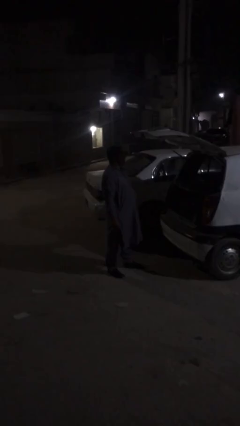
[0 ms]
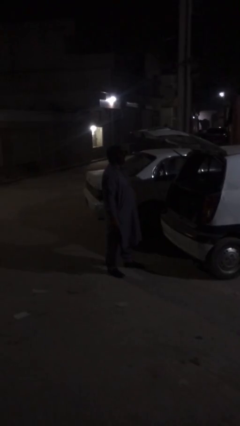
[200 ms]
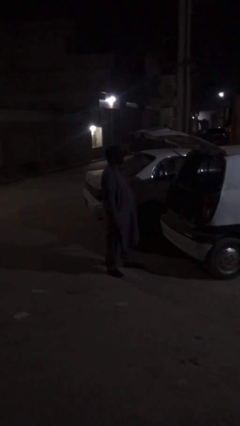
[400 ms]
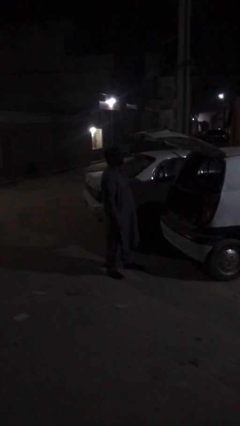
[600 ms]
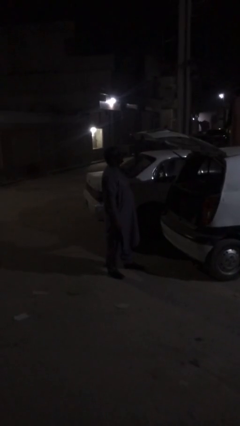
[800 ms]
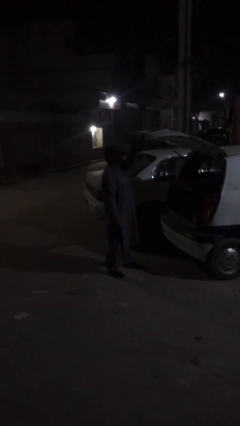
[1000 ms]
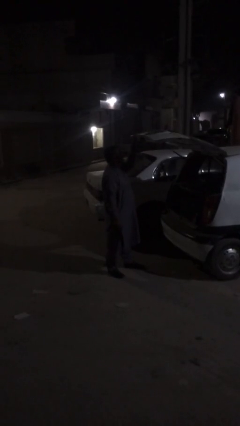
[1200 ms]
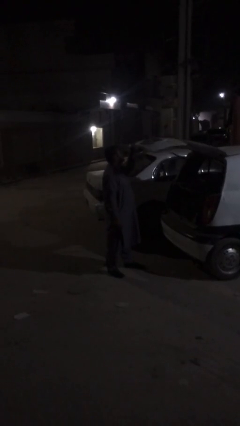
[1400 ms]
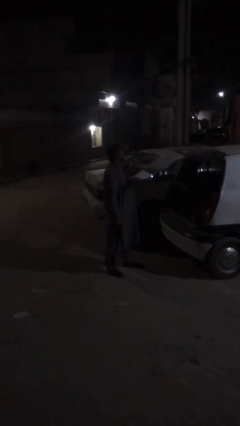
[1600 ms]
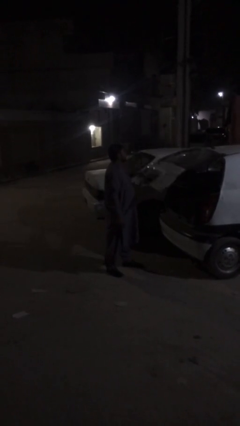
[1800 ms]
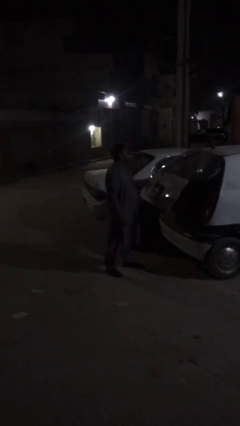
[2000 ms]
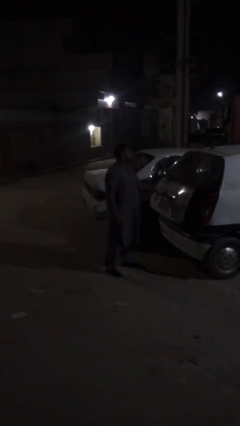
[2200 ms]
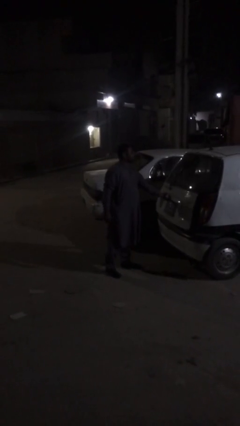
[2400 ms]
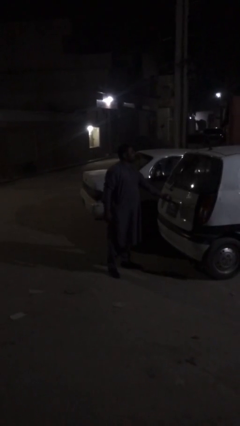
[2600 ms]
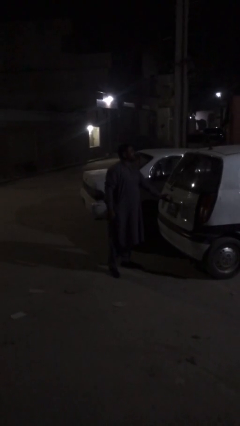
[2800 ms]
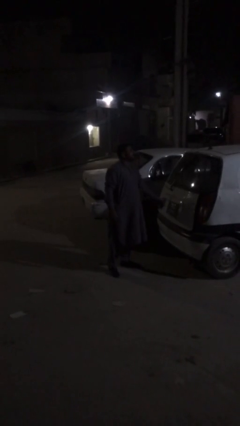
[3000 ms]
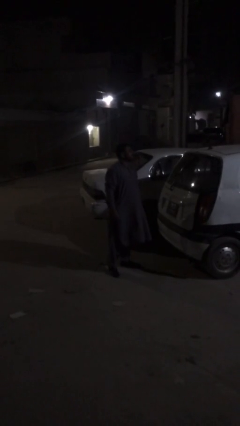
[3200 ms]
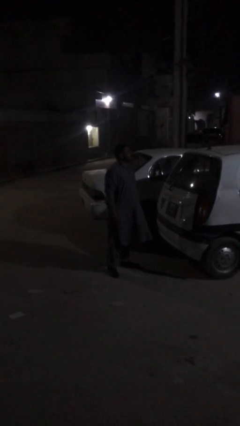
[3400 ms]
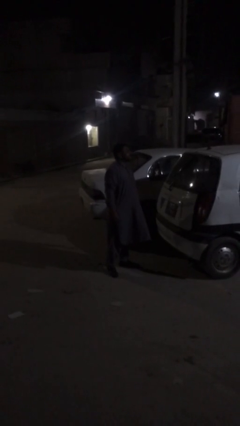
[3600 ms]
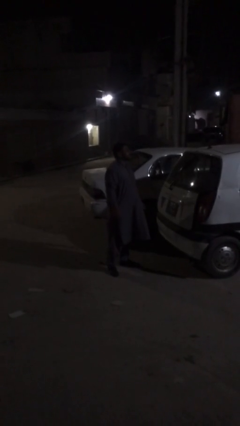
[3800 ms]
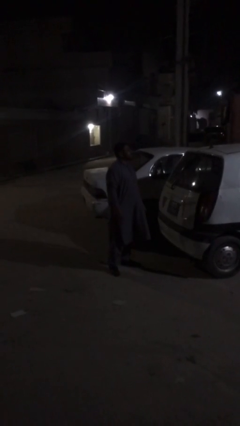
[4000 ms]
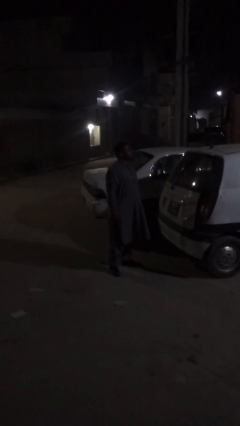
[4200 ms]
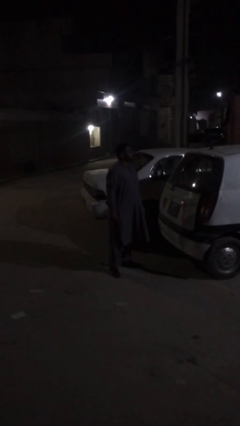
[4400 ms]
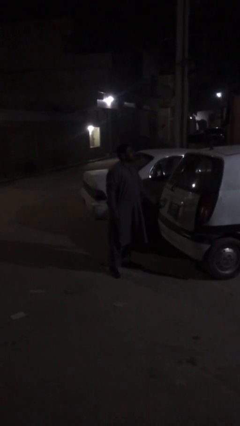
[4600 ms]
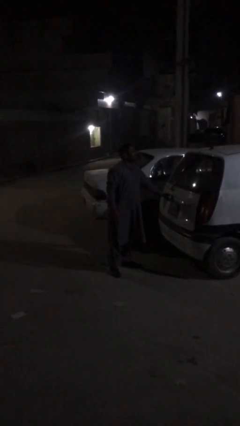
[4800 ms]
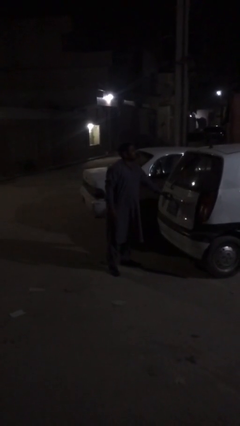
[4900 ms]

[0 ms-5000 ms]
person closes car trunk

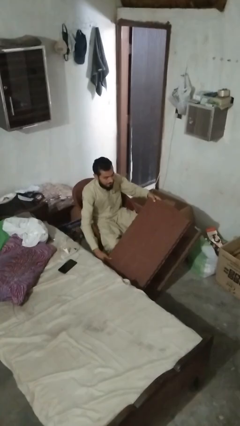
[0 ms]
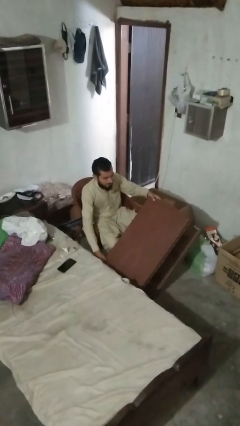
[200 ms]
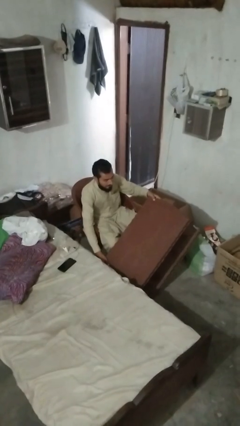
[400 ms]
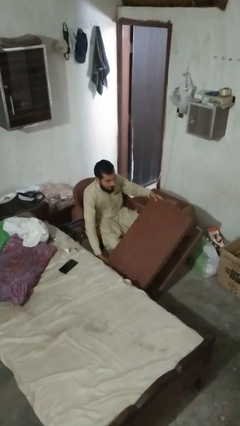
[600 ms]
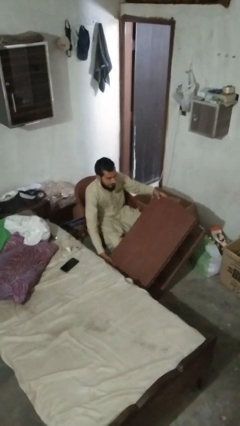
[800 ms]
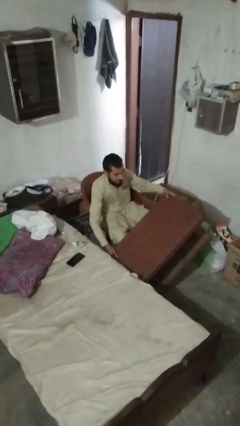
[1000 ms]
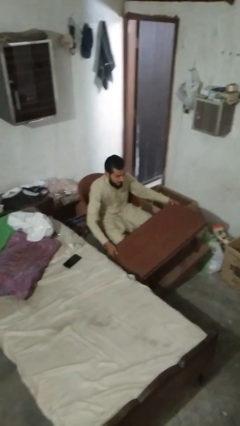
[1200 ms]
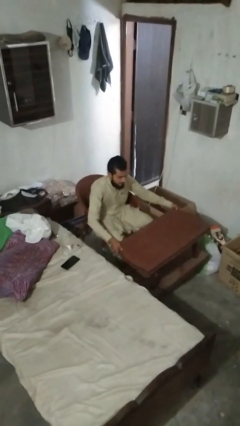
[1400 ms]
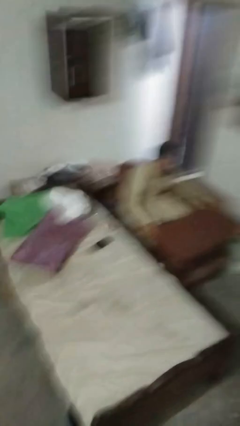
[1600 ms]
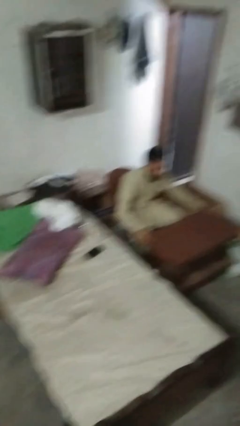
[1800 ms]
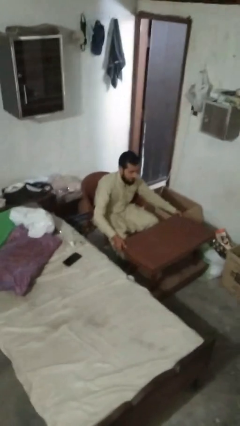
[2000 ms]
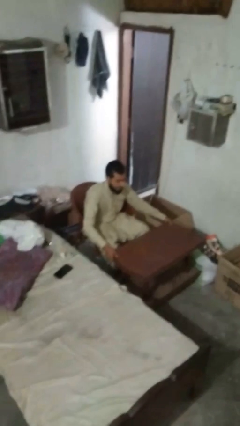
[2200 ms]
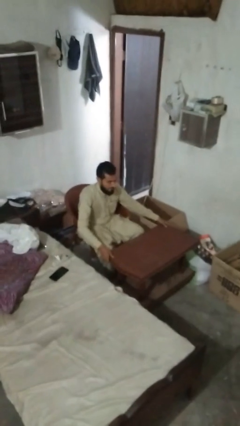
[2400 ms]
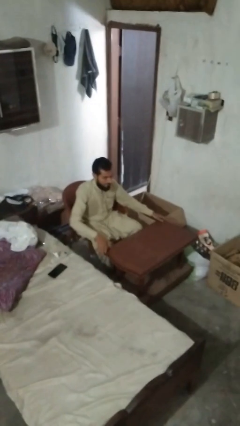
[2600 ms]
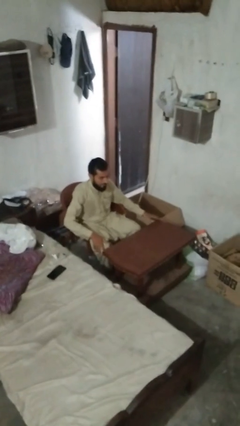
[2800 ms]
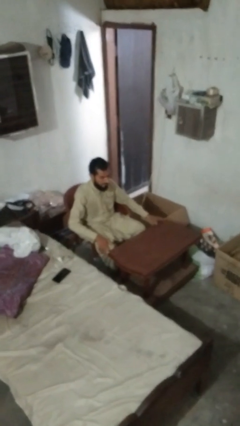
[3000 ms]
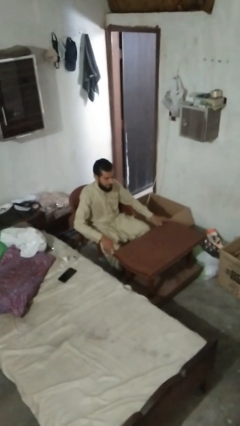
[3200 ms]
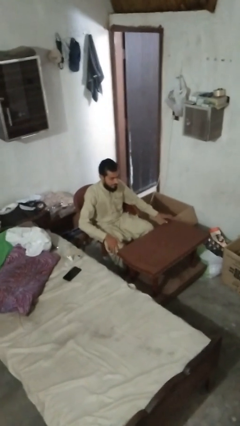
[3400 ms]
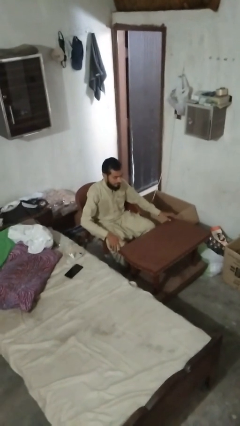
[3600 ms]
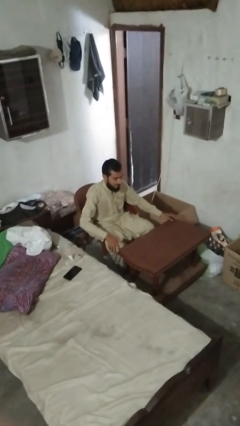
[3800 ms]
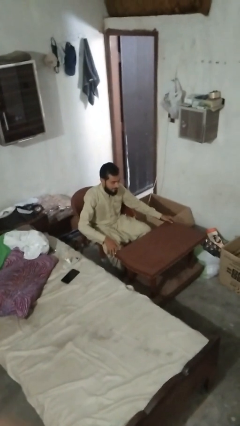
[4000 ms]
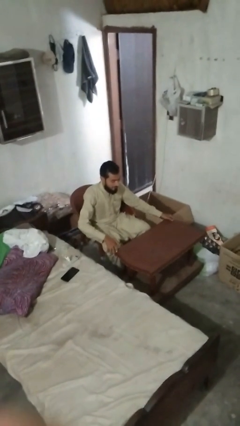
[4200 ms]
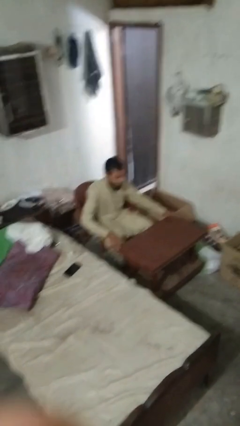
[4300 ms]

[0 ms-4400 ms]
person sets upright furniture

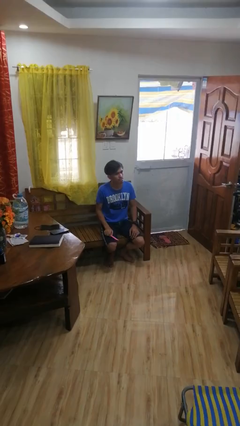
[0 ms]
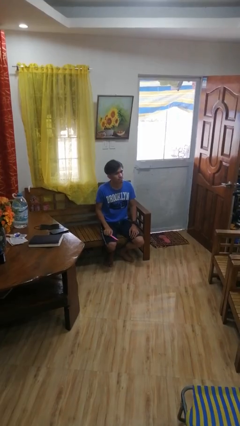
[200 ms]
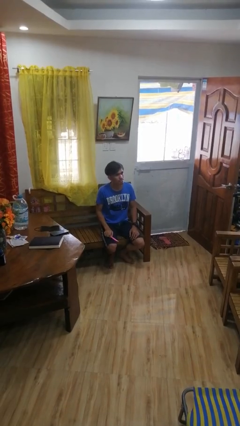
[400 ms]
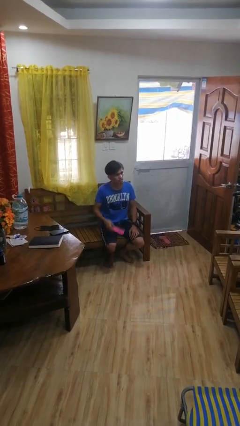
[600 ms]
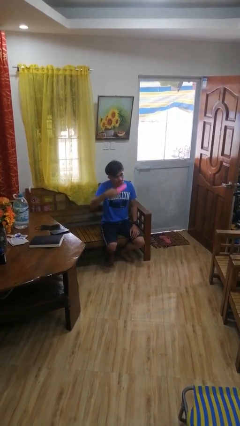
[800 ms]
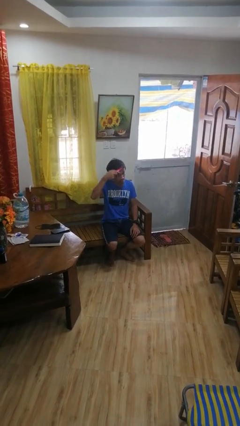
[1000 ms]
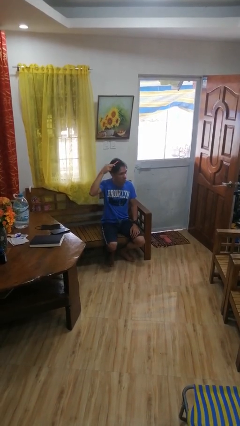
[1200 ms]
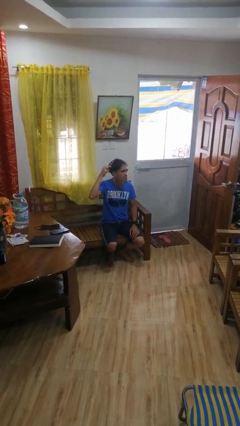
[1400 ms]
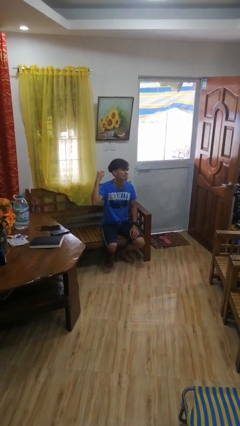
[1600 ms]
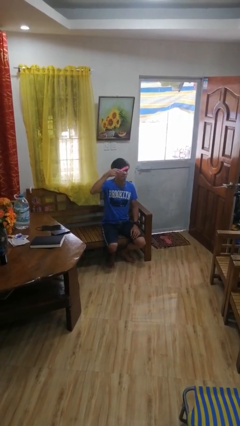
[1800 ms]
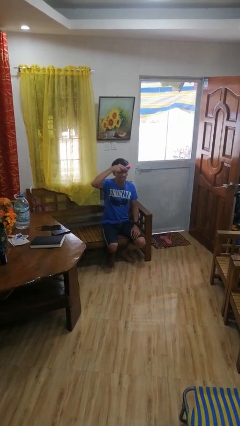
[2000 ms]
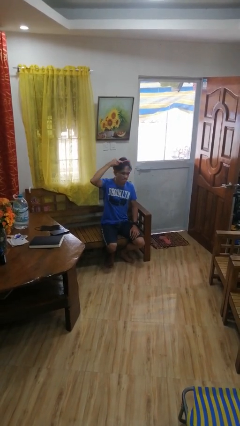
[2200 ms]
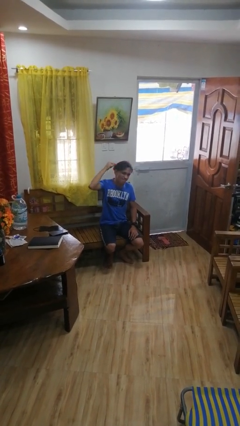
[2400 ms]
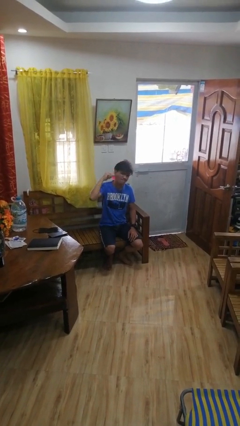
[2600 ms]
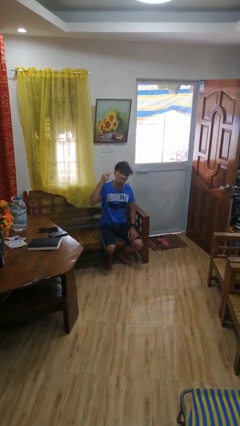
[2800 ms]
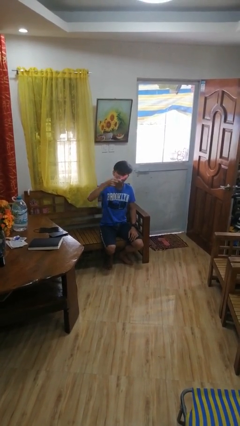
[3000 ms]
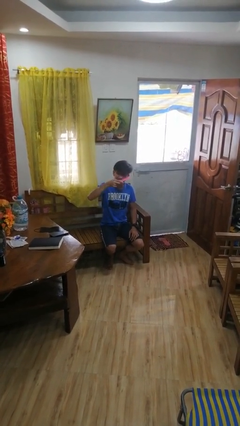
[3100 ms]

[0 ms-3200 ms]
person brushes hair

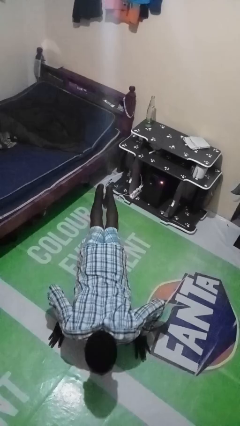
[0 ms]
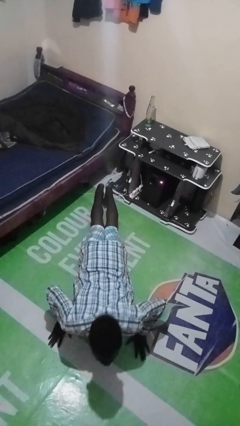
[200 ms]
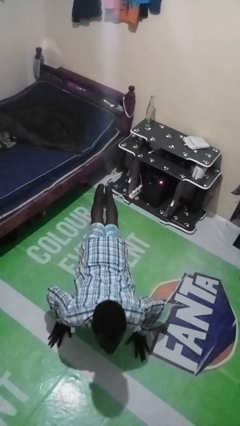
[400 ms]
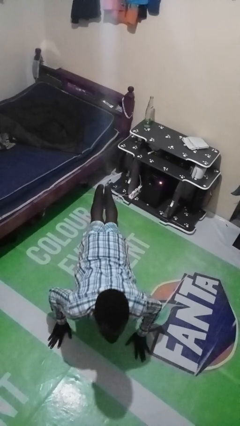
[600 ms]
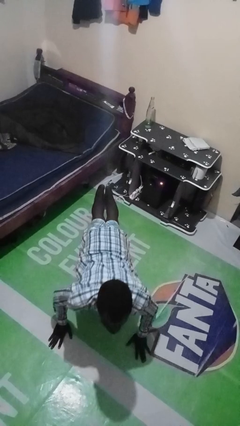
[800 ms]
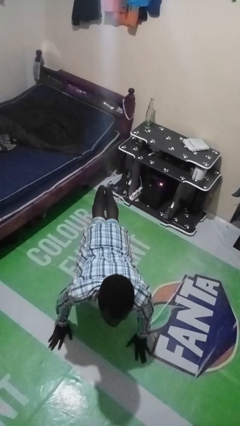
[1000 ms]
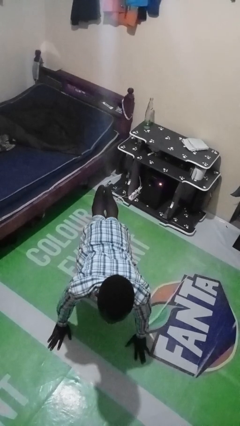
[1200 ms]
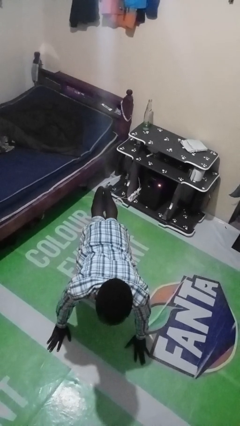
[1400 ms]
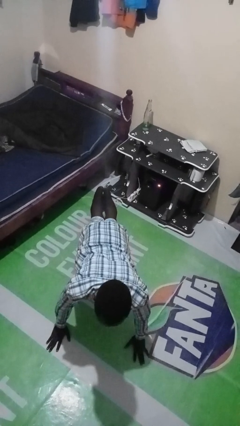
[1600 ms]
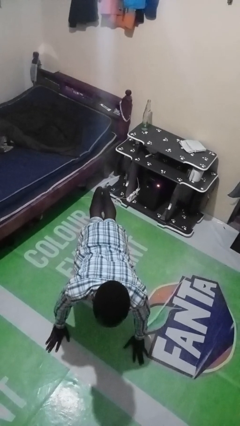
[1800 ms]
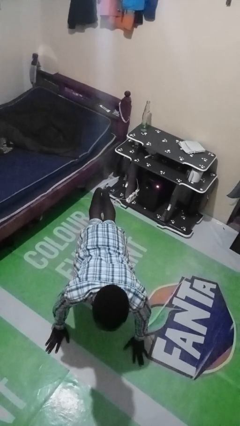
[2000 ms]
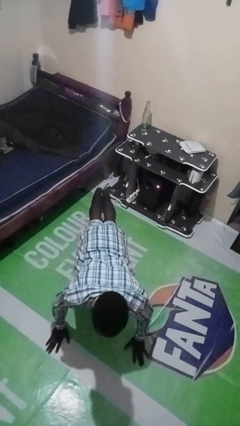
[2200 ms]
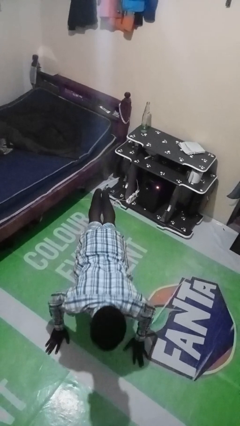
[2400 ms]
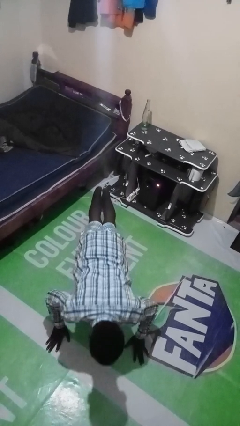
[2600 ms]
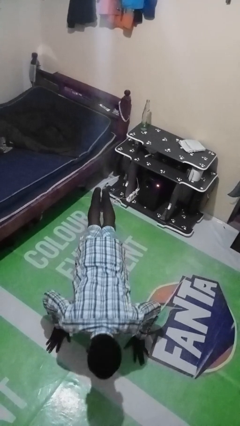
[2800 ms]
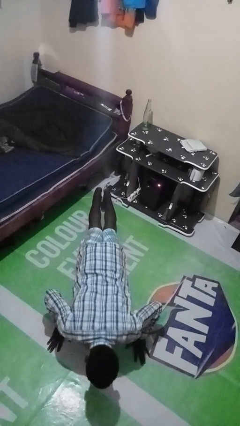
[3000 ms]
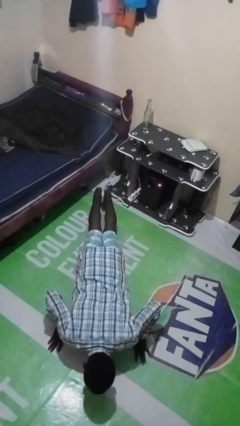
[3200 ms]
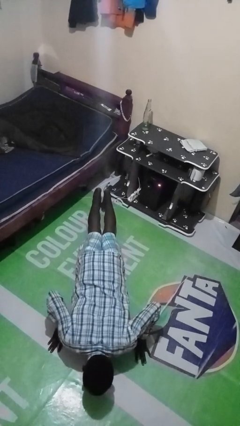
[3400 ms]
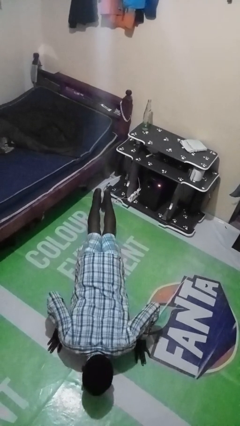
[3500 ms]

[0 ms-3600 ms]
person exercises with pushup

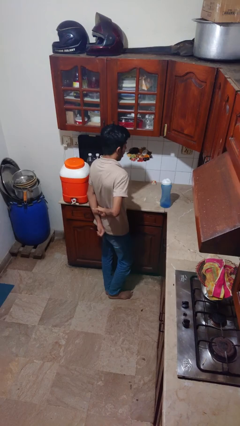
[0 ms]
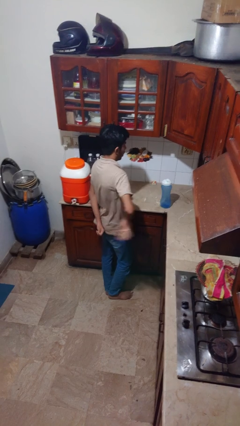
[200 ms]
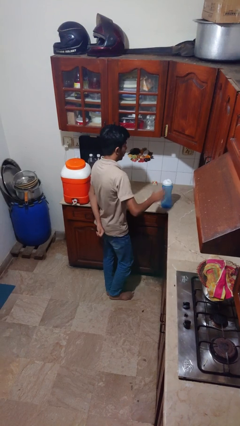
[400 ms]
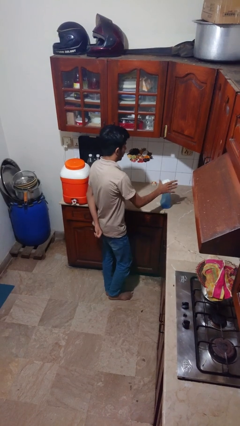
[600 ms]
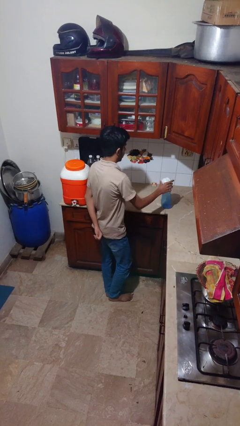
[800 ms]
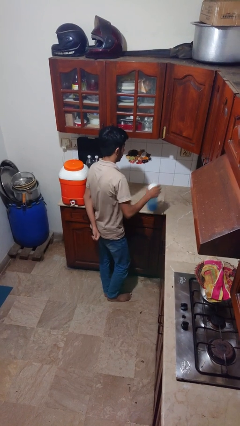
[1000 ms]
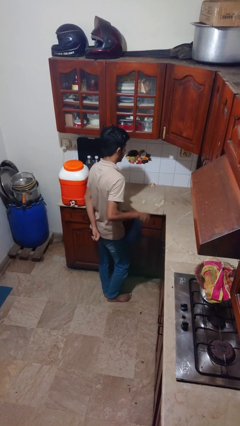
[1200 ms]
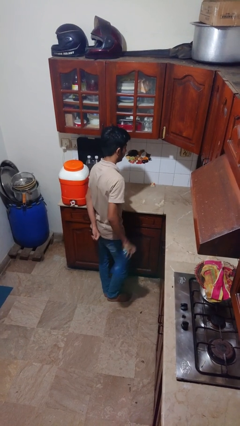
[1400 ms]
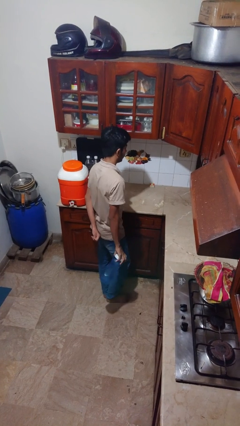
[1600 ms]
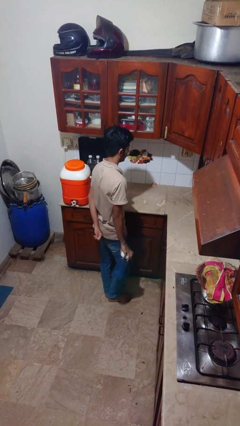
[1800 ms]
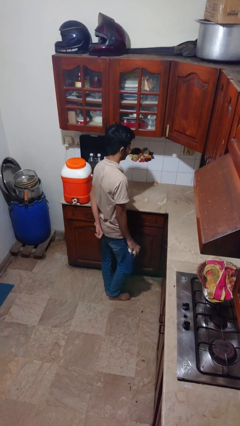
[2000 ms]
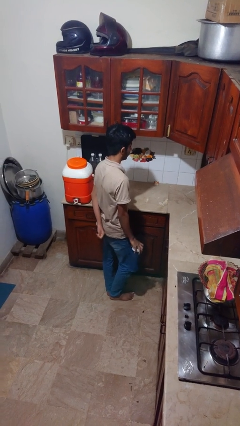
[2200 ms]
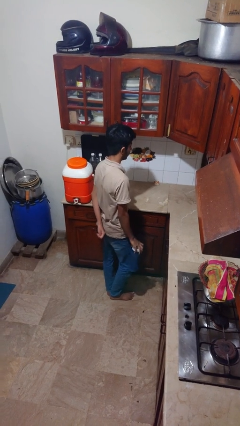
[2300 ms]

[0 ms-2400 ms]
person picks up object from countertop
